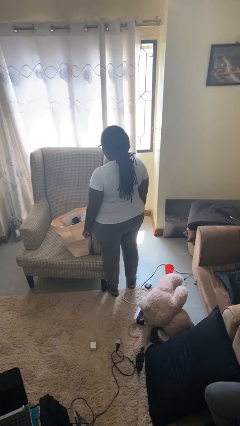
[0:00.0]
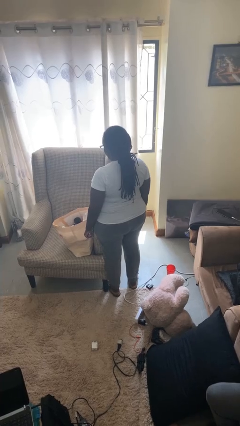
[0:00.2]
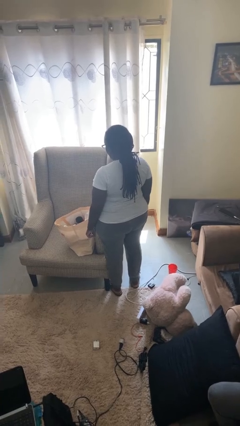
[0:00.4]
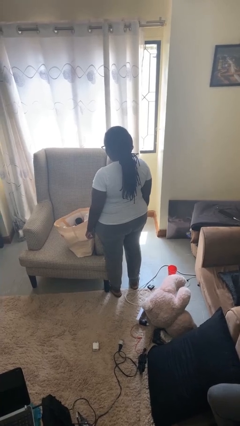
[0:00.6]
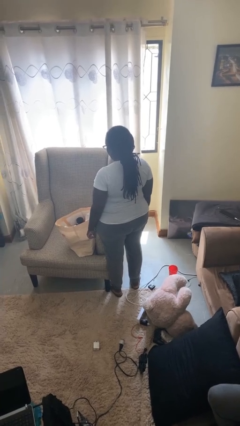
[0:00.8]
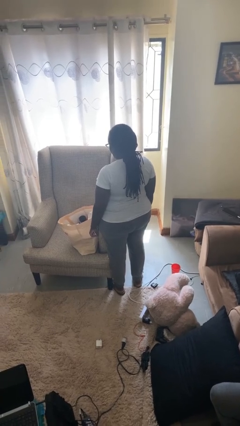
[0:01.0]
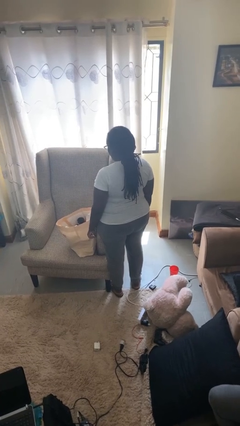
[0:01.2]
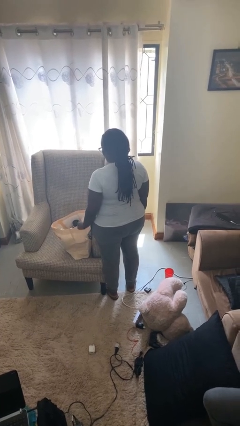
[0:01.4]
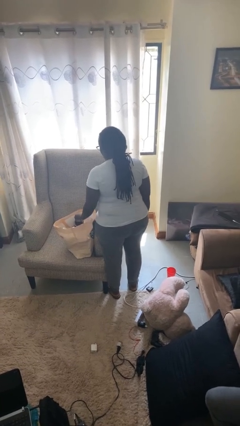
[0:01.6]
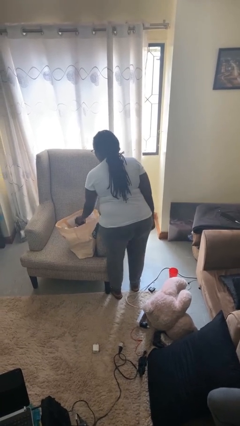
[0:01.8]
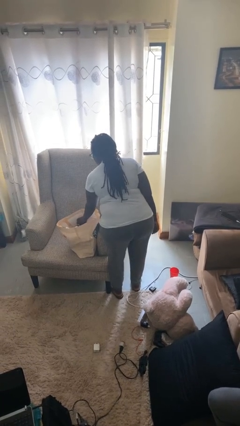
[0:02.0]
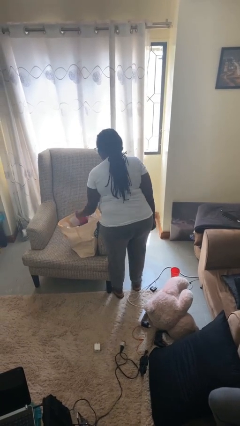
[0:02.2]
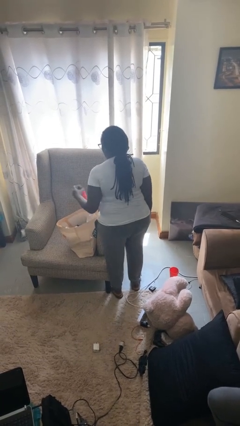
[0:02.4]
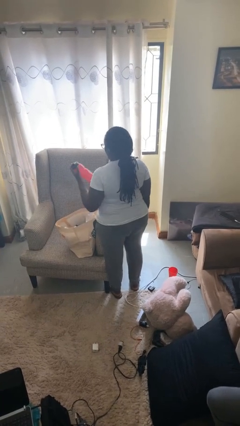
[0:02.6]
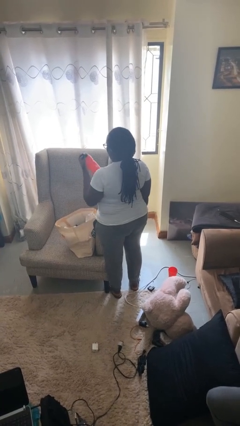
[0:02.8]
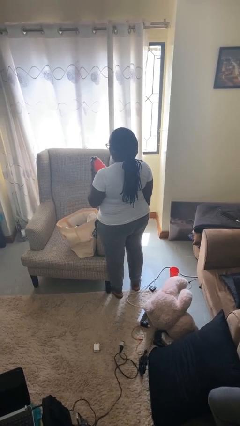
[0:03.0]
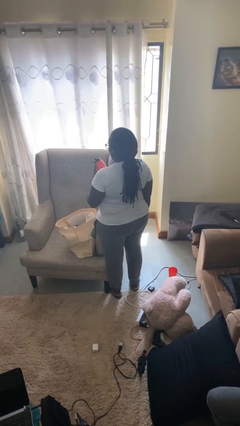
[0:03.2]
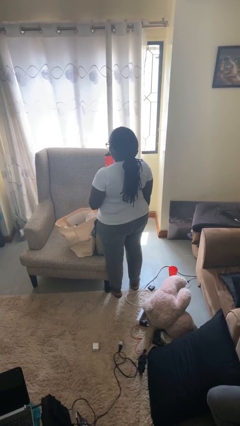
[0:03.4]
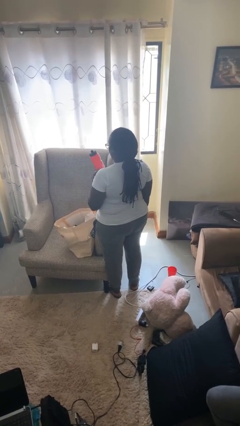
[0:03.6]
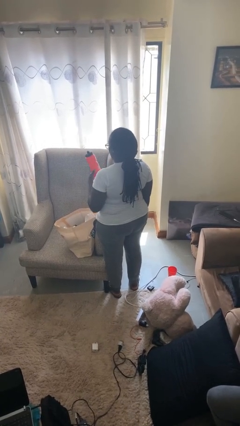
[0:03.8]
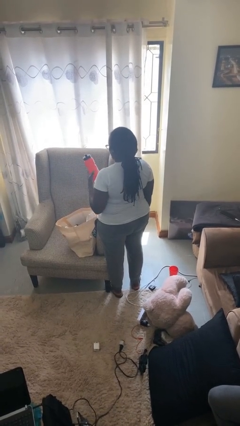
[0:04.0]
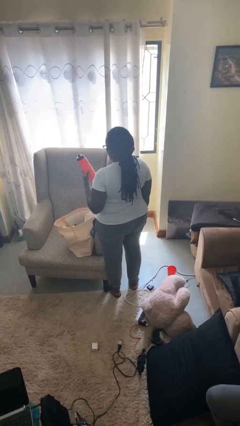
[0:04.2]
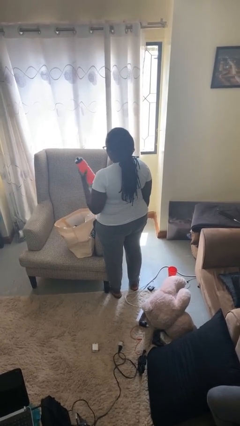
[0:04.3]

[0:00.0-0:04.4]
person takes object from bag

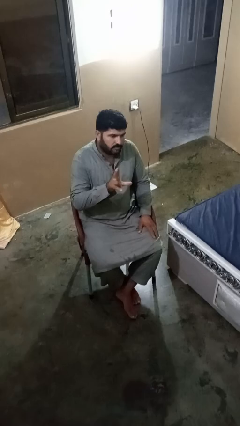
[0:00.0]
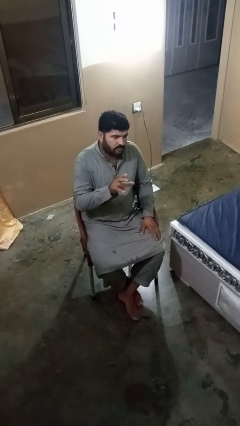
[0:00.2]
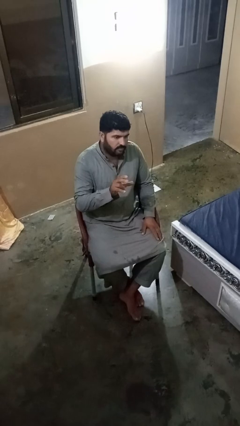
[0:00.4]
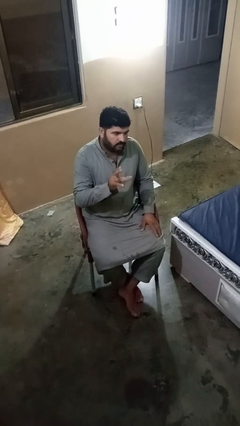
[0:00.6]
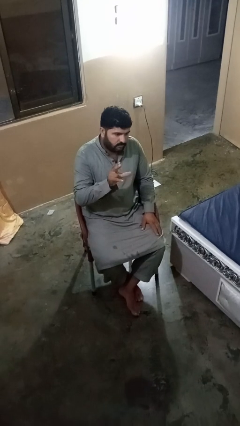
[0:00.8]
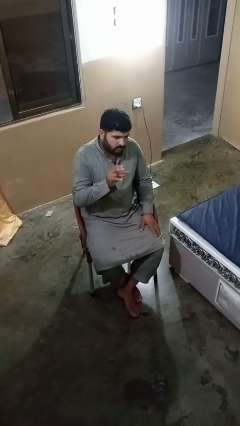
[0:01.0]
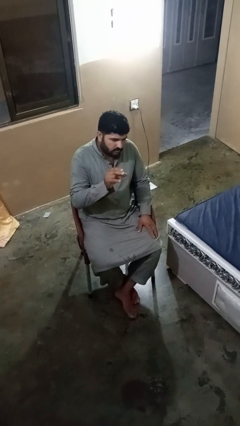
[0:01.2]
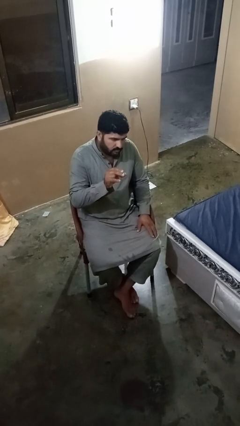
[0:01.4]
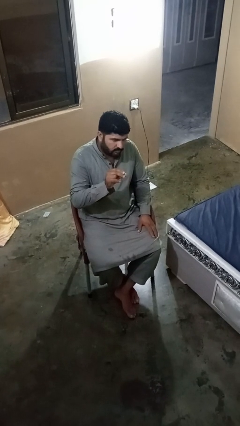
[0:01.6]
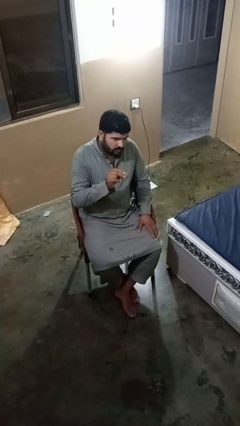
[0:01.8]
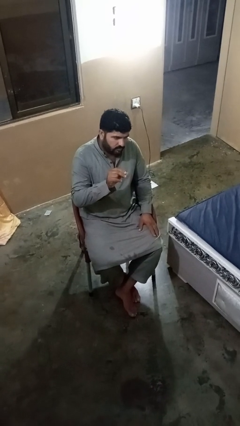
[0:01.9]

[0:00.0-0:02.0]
person gestures zoom in

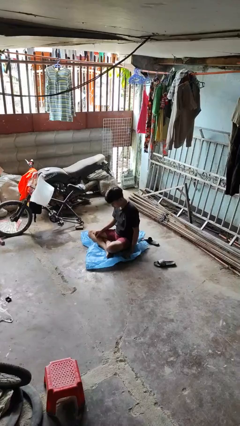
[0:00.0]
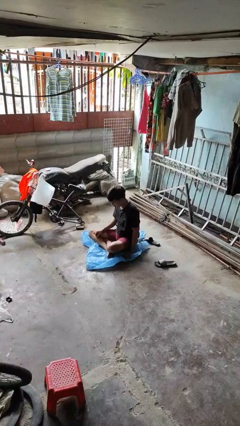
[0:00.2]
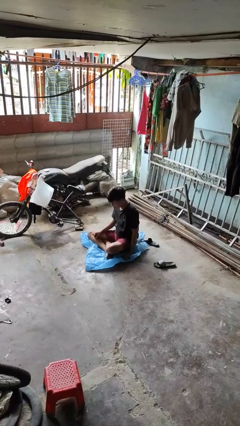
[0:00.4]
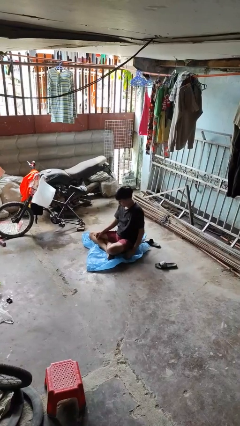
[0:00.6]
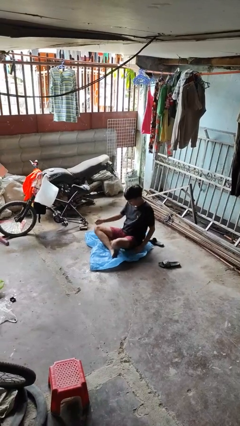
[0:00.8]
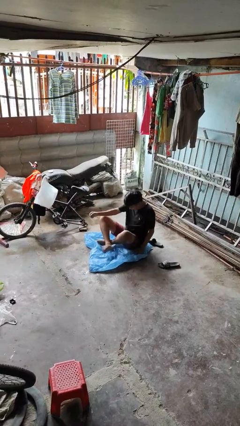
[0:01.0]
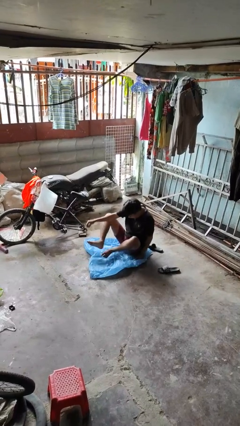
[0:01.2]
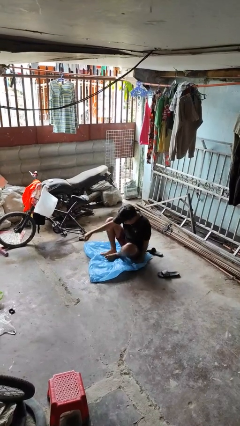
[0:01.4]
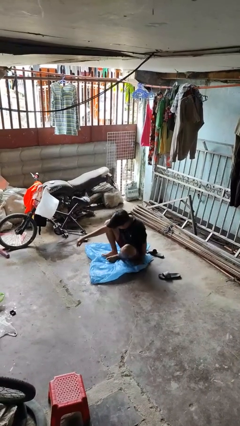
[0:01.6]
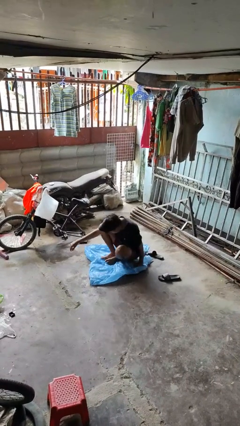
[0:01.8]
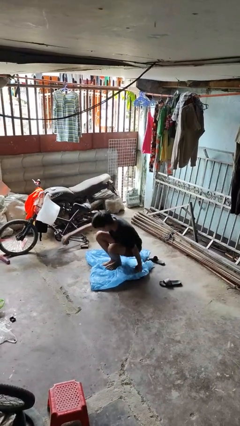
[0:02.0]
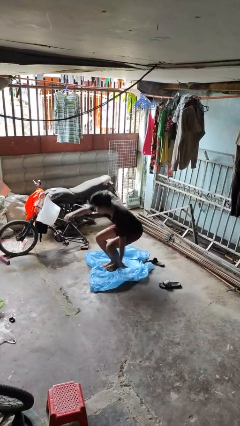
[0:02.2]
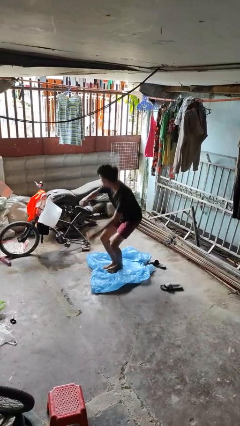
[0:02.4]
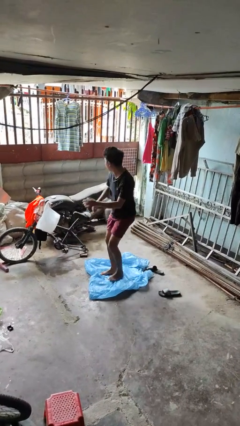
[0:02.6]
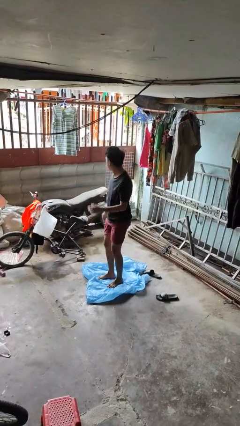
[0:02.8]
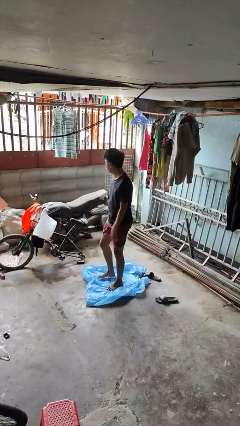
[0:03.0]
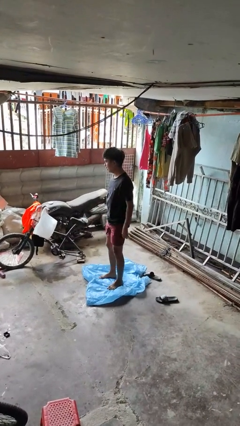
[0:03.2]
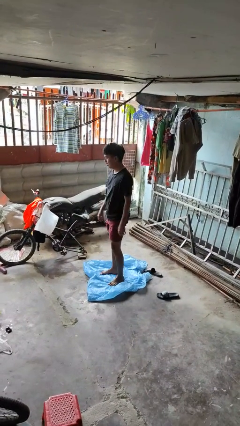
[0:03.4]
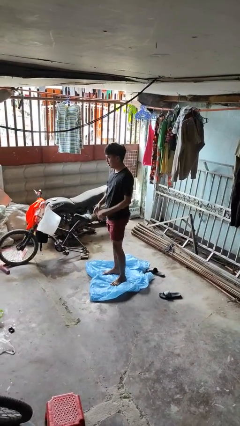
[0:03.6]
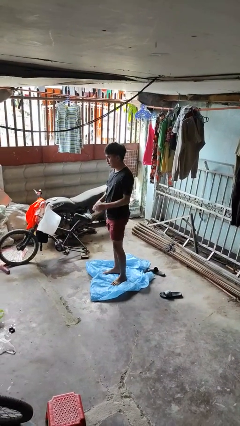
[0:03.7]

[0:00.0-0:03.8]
person stands up from floor

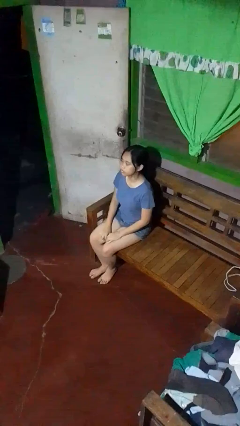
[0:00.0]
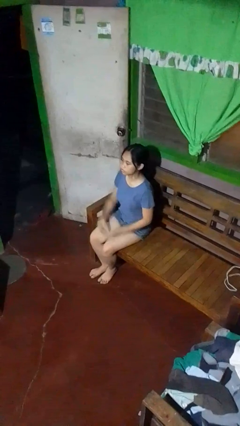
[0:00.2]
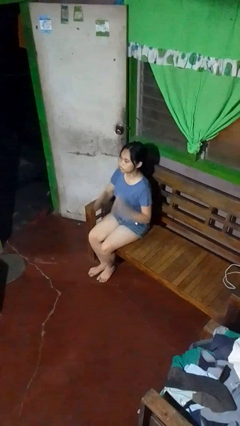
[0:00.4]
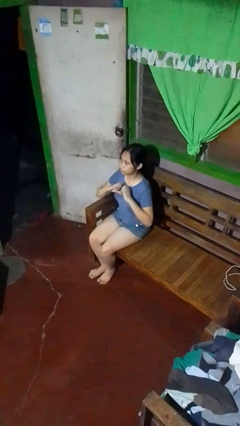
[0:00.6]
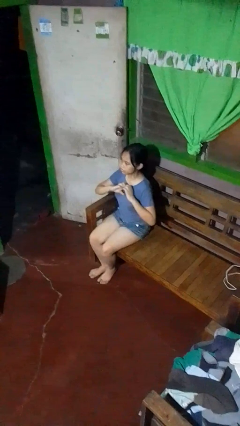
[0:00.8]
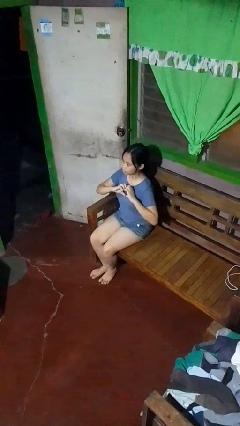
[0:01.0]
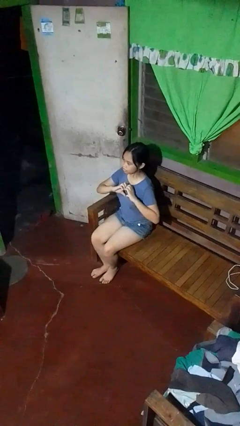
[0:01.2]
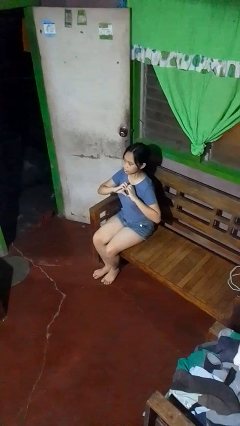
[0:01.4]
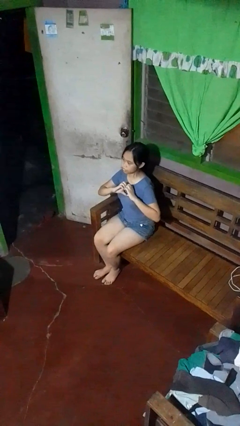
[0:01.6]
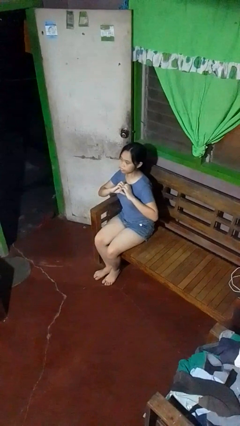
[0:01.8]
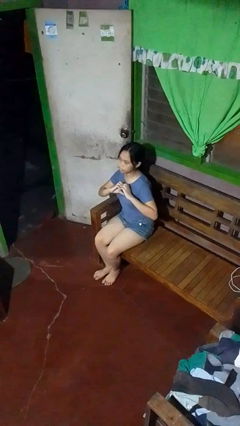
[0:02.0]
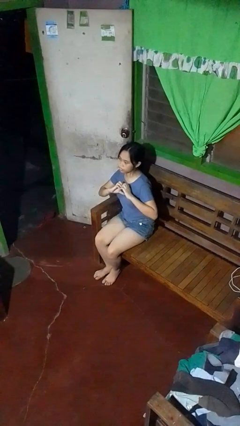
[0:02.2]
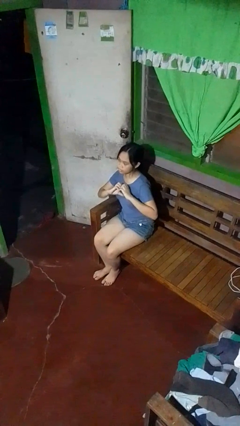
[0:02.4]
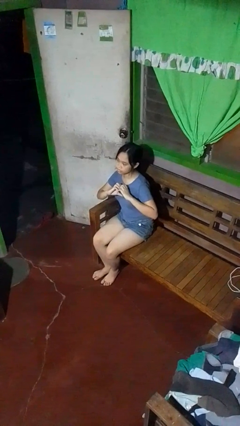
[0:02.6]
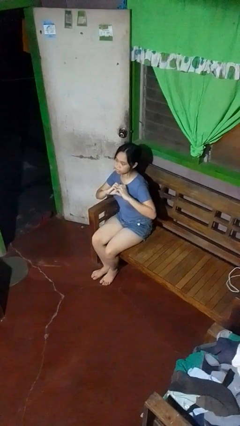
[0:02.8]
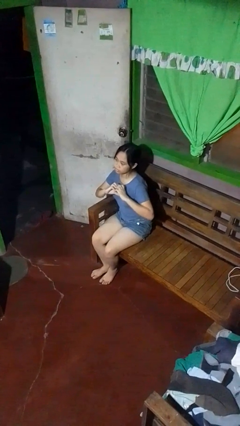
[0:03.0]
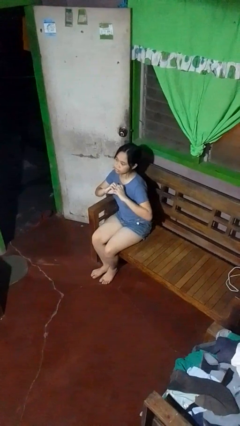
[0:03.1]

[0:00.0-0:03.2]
person gestures heart

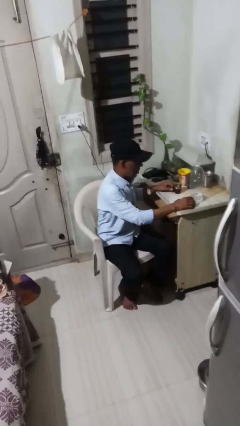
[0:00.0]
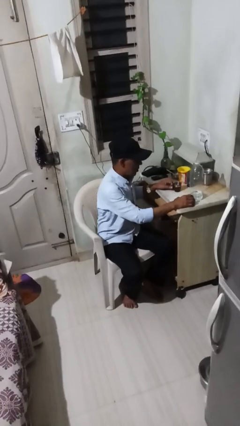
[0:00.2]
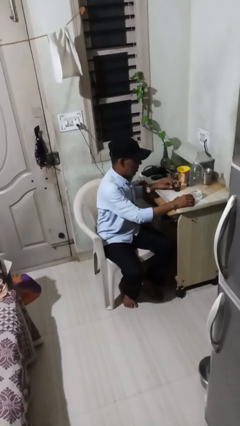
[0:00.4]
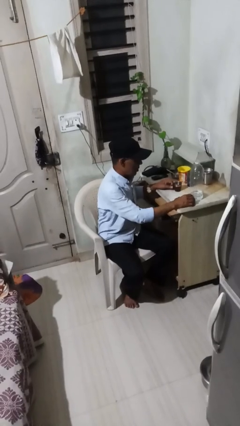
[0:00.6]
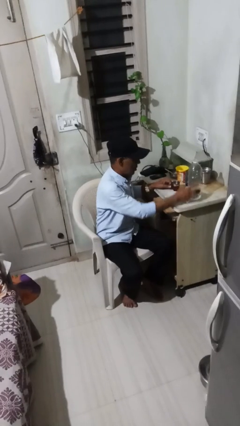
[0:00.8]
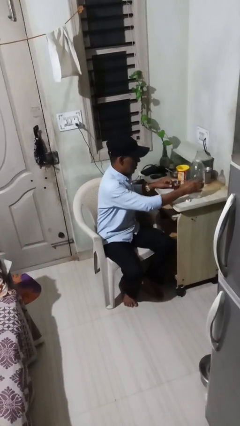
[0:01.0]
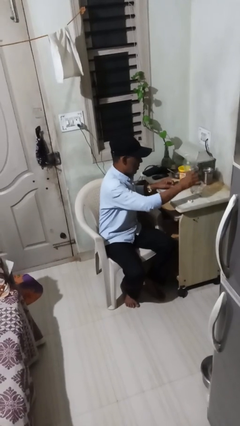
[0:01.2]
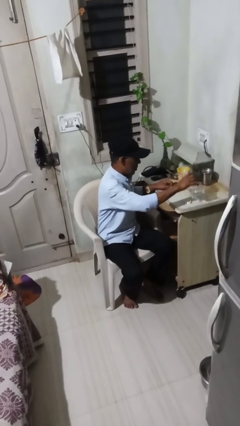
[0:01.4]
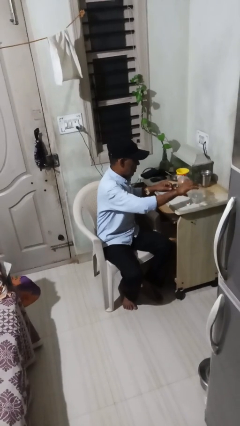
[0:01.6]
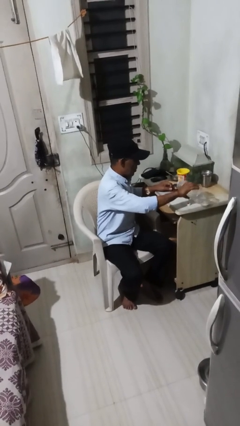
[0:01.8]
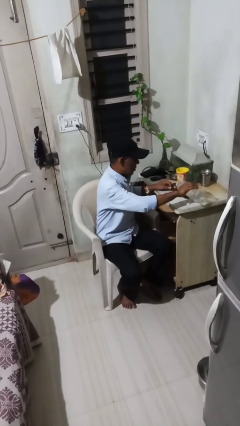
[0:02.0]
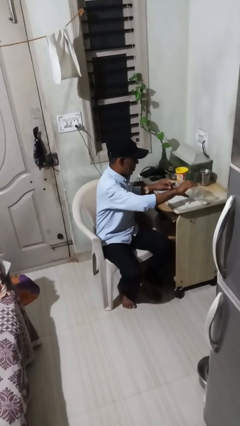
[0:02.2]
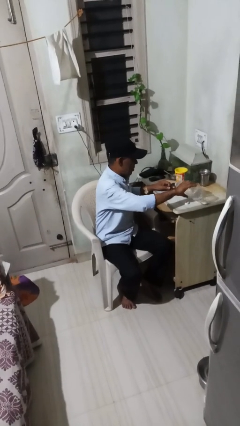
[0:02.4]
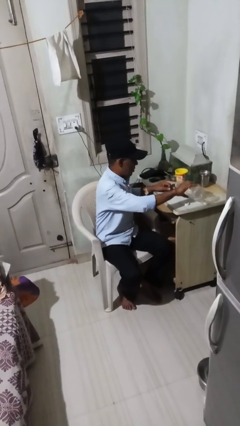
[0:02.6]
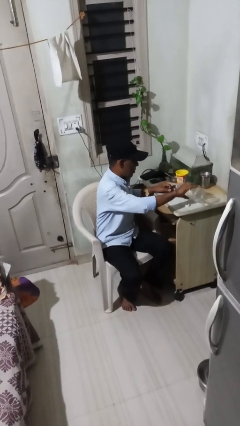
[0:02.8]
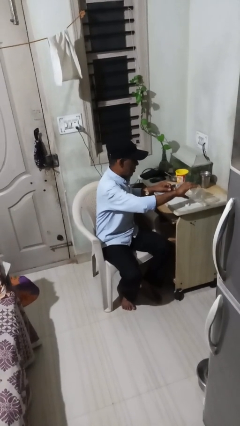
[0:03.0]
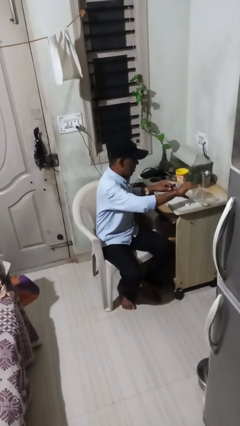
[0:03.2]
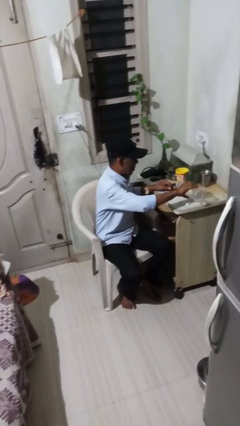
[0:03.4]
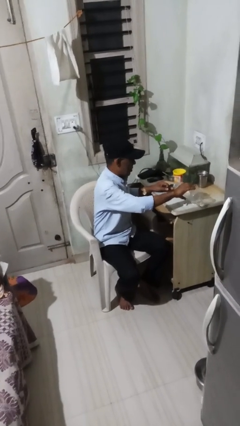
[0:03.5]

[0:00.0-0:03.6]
person pours liquid into cup
